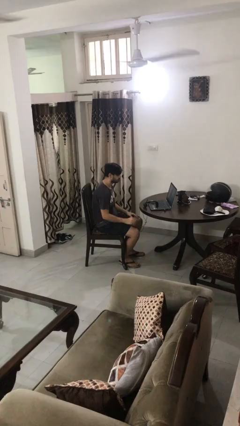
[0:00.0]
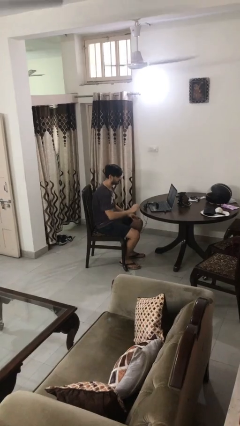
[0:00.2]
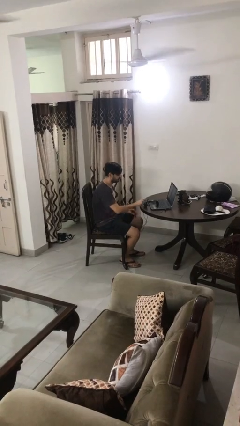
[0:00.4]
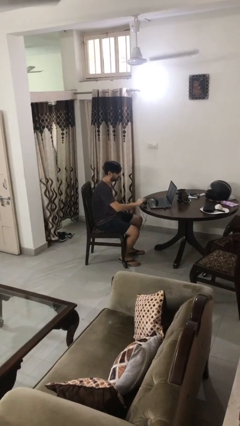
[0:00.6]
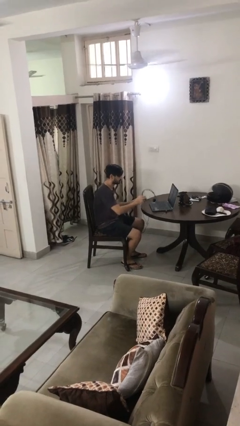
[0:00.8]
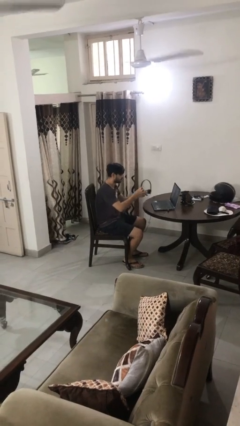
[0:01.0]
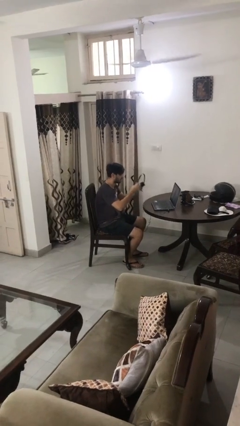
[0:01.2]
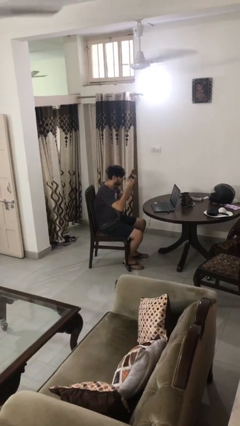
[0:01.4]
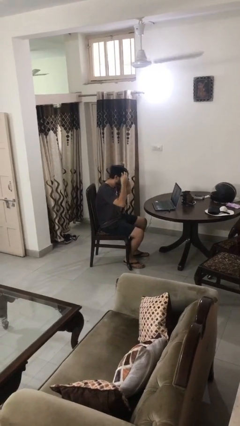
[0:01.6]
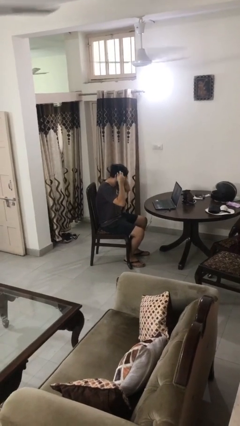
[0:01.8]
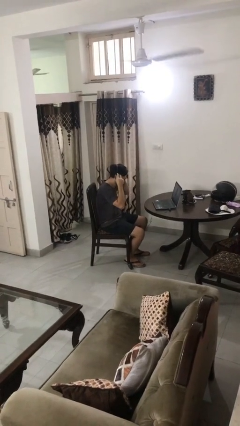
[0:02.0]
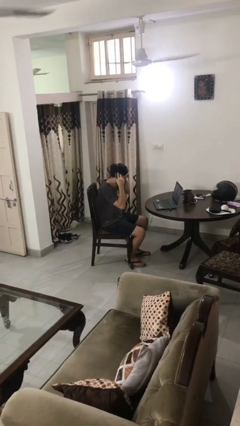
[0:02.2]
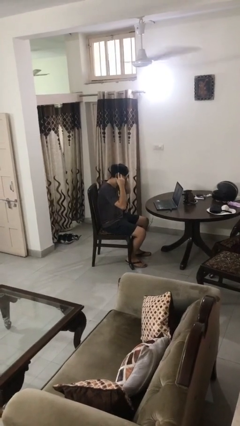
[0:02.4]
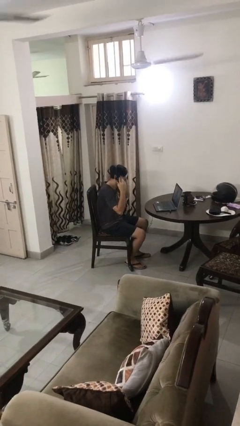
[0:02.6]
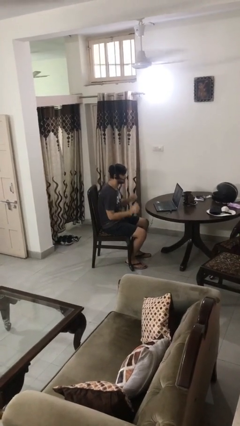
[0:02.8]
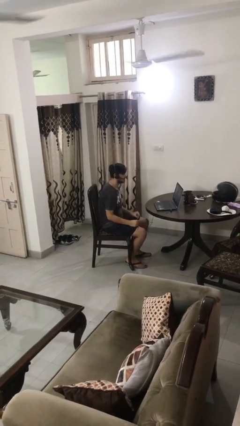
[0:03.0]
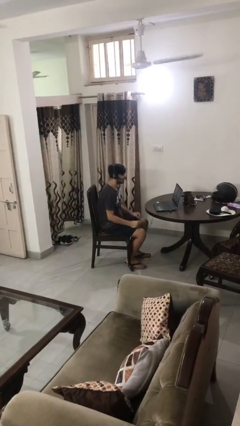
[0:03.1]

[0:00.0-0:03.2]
person puts on headphones

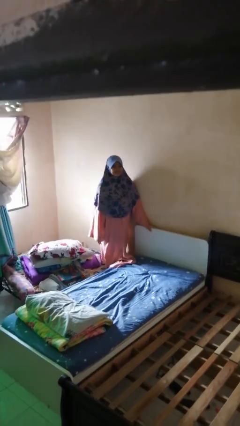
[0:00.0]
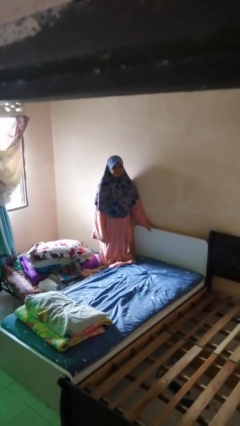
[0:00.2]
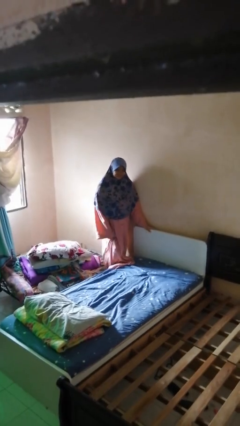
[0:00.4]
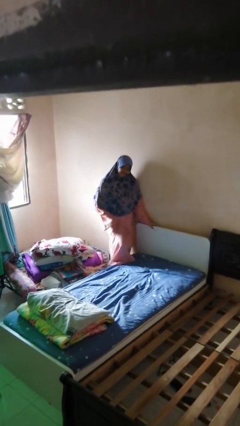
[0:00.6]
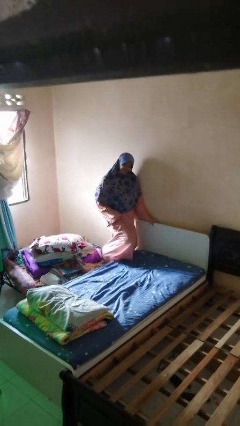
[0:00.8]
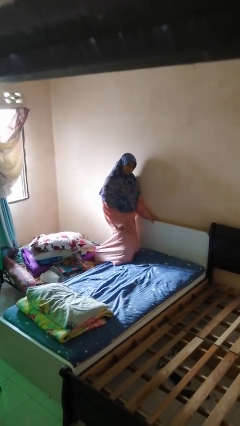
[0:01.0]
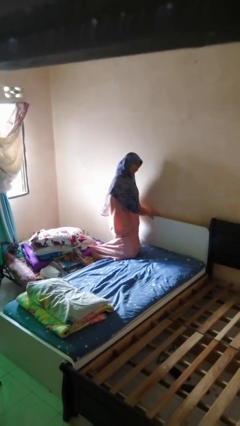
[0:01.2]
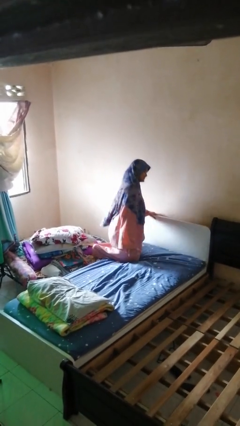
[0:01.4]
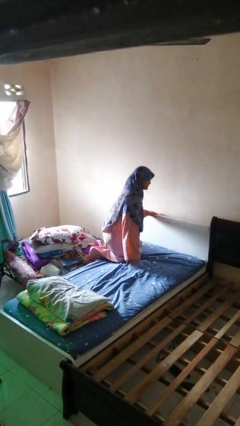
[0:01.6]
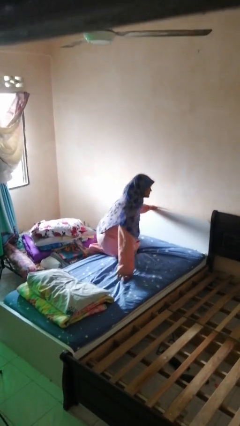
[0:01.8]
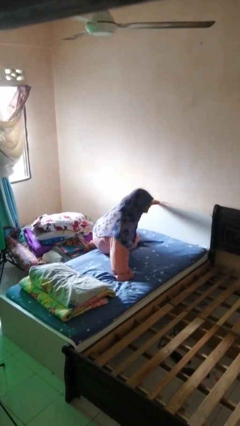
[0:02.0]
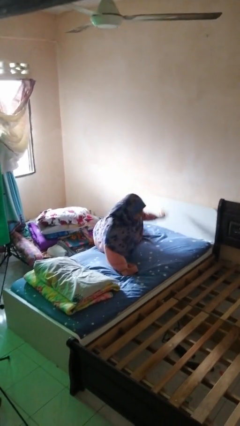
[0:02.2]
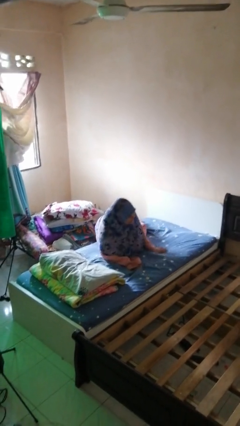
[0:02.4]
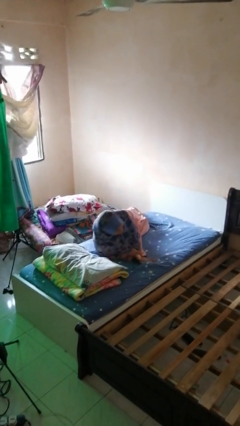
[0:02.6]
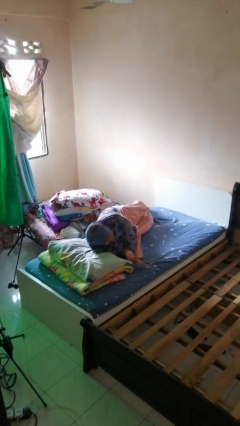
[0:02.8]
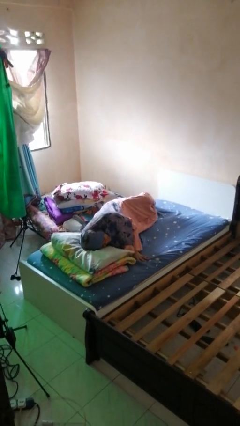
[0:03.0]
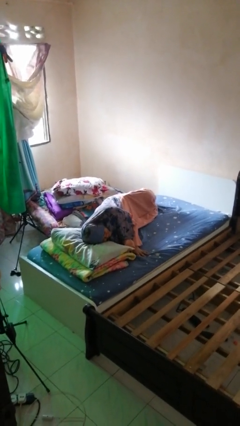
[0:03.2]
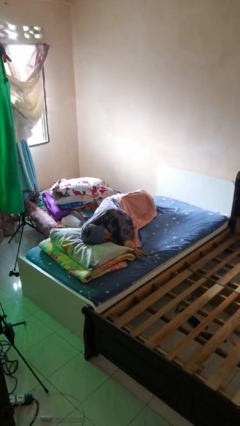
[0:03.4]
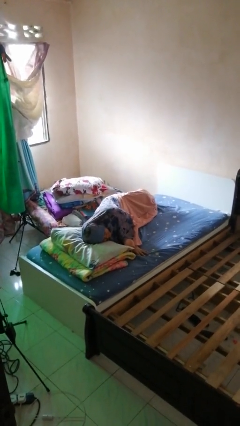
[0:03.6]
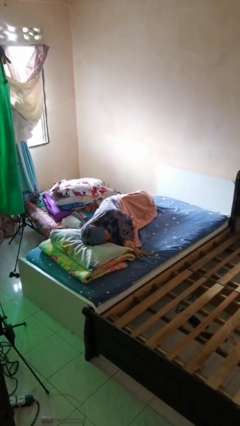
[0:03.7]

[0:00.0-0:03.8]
person lies down on bed

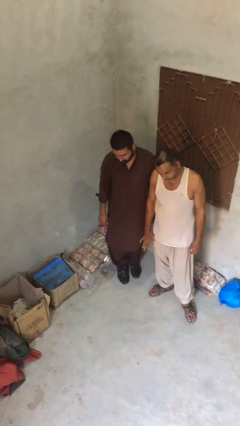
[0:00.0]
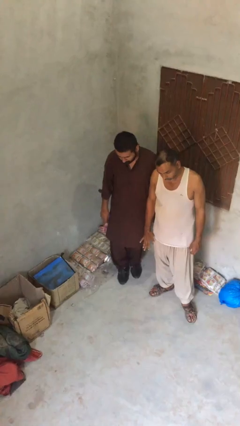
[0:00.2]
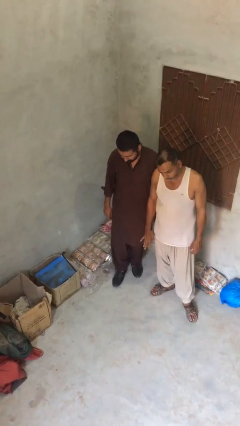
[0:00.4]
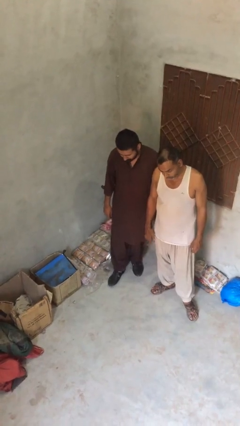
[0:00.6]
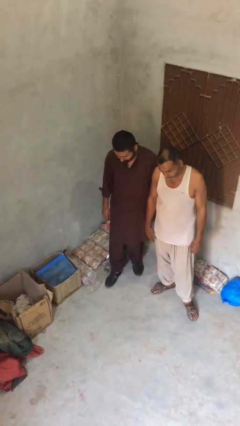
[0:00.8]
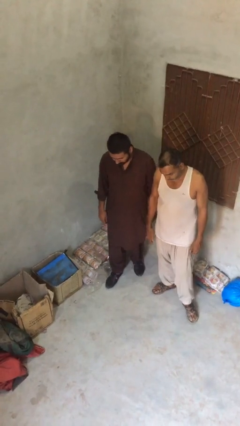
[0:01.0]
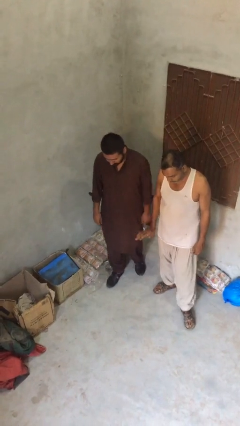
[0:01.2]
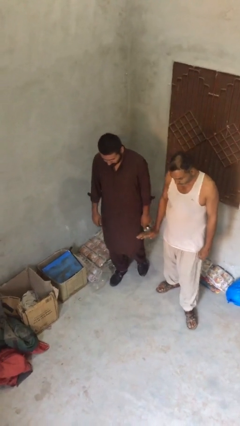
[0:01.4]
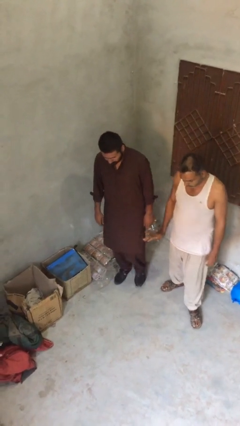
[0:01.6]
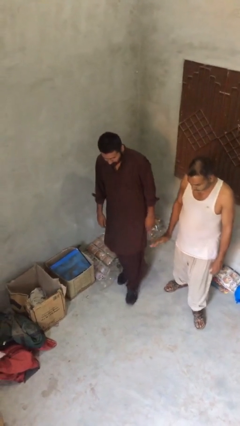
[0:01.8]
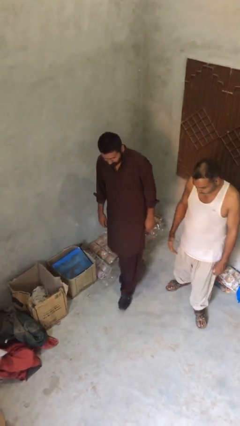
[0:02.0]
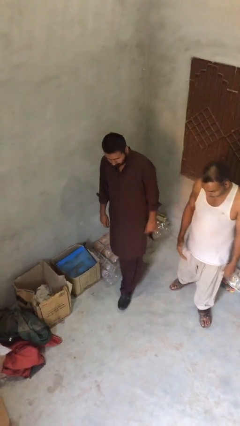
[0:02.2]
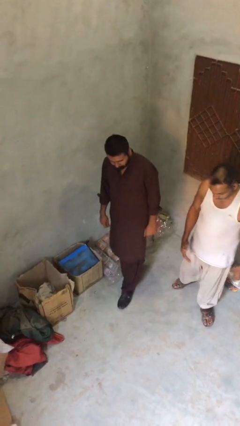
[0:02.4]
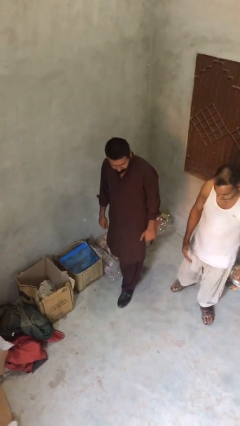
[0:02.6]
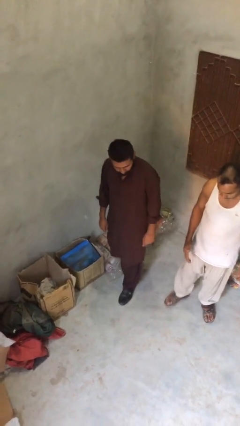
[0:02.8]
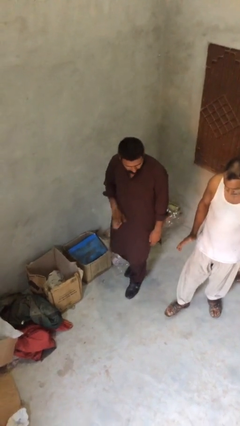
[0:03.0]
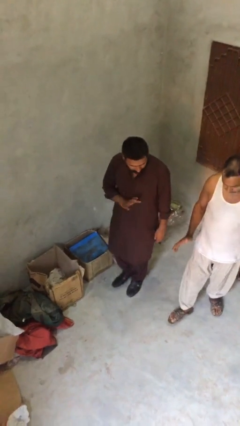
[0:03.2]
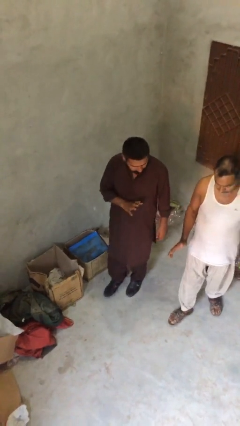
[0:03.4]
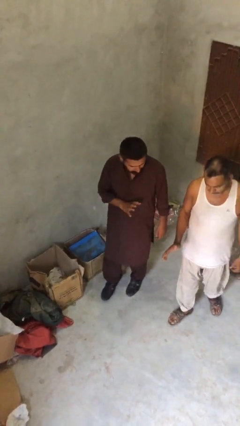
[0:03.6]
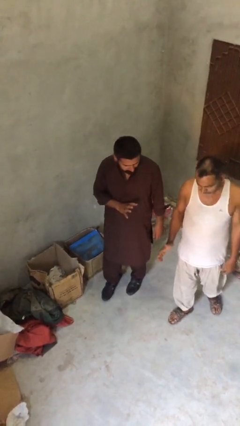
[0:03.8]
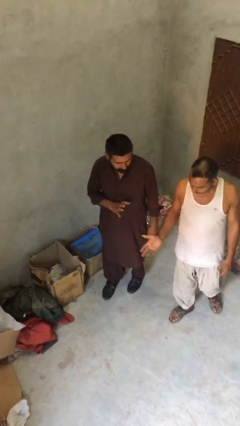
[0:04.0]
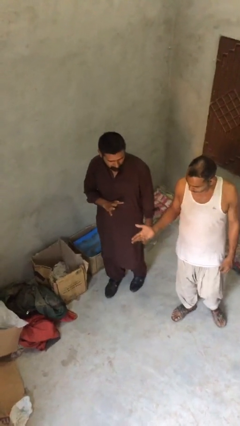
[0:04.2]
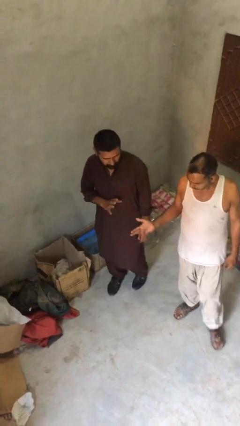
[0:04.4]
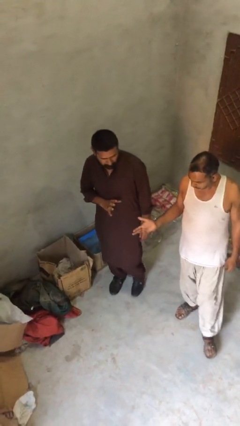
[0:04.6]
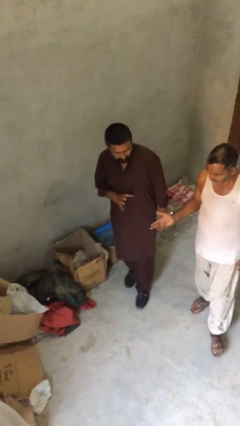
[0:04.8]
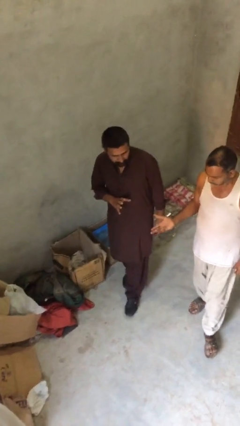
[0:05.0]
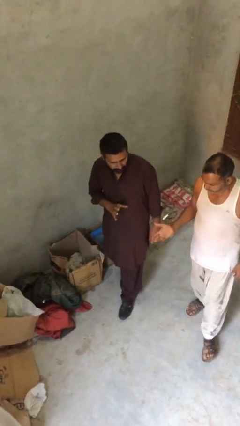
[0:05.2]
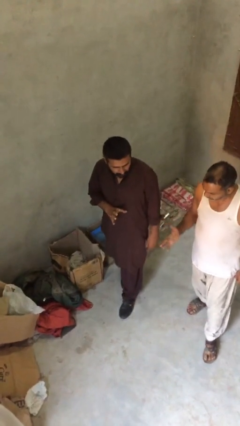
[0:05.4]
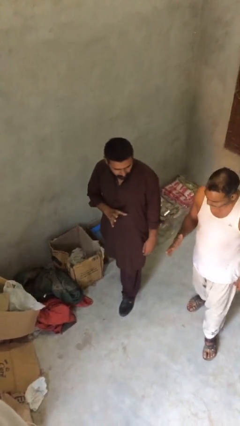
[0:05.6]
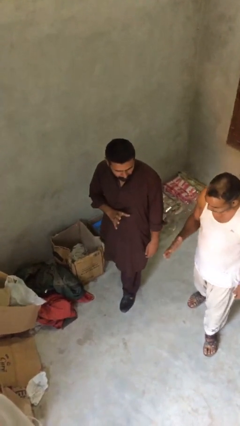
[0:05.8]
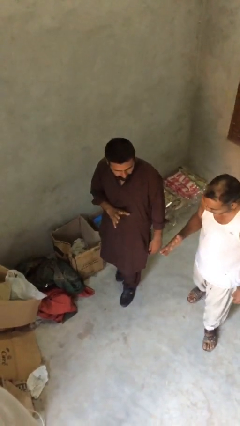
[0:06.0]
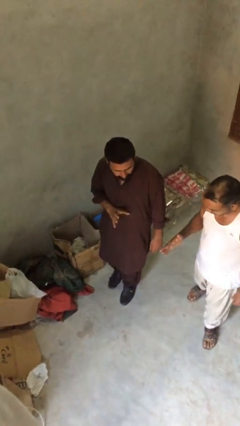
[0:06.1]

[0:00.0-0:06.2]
person talks to person

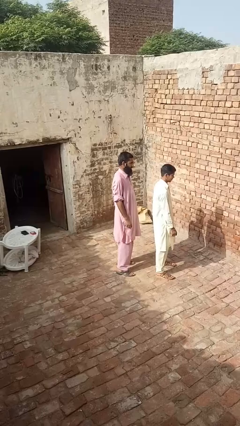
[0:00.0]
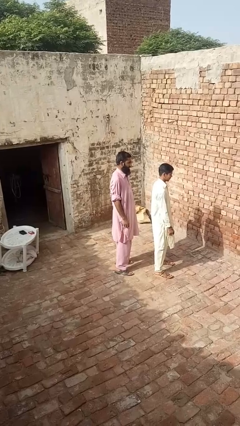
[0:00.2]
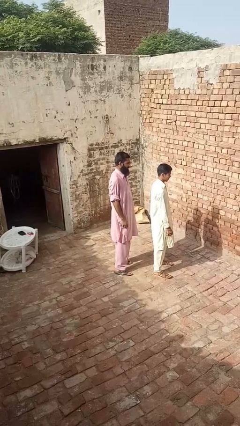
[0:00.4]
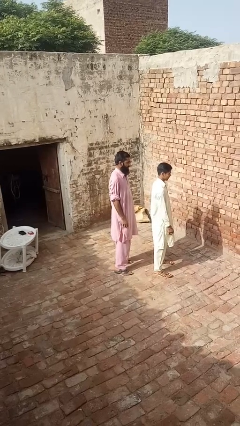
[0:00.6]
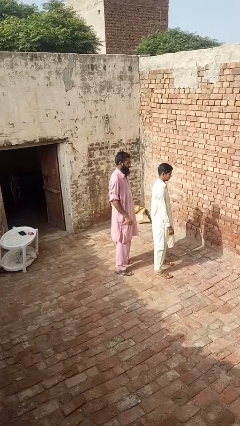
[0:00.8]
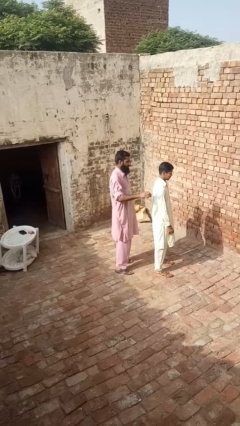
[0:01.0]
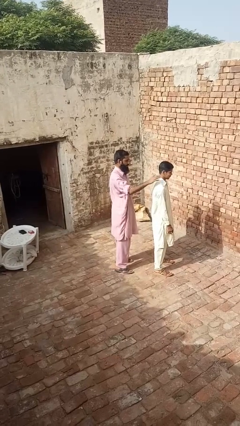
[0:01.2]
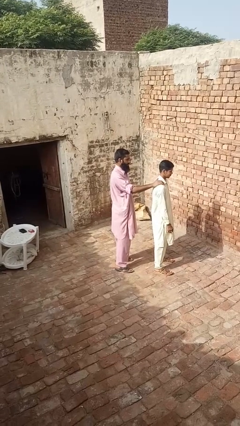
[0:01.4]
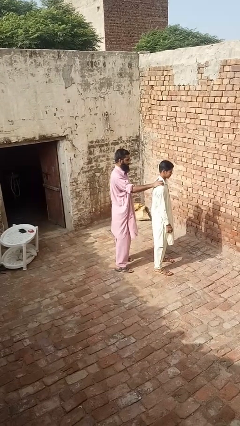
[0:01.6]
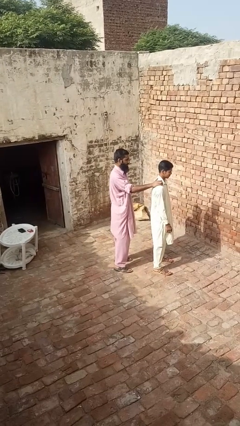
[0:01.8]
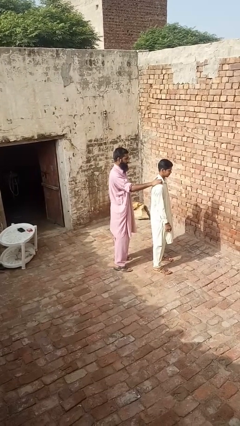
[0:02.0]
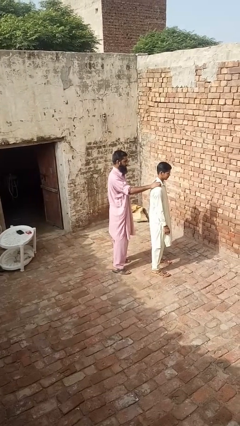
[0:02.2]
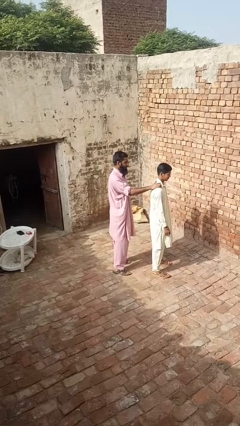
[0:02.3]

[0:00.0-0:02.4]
person grabs person by shoulder

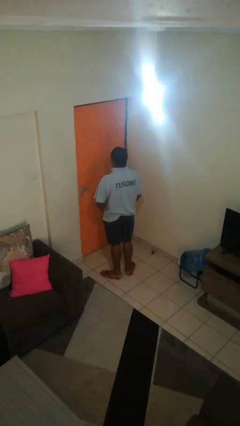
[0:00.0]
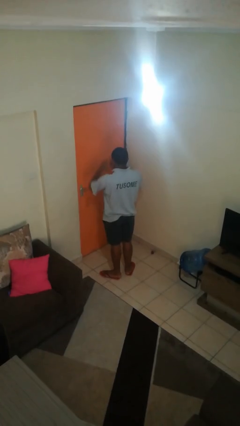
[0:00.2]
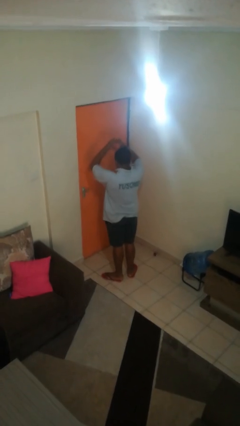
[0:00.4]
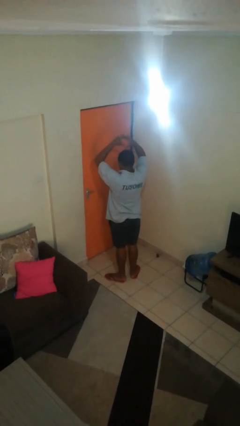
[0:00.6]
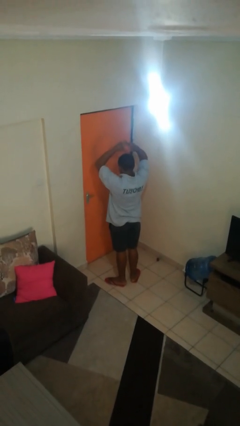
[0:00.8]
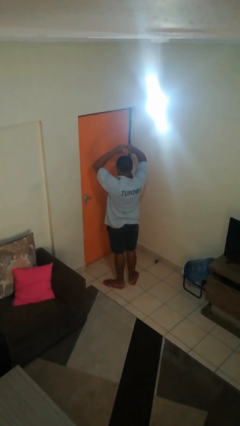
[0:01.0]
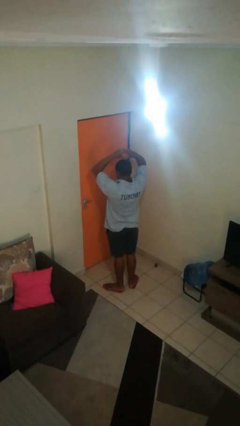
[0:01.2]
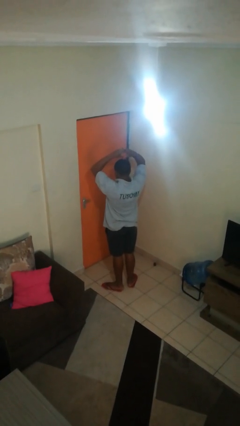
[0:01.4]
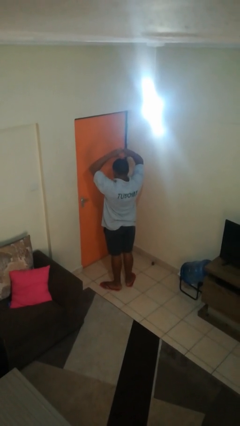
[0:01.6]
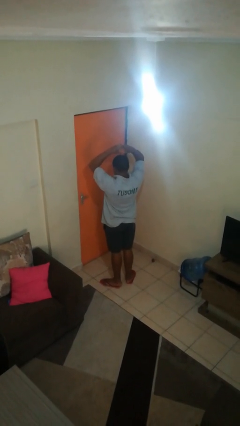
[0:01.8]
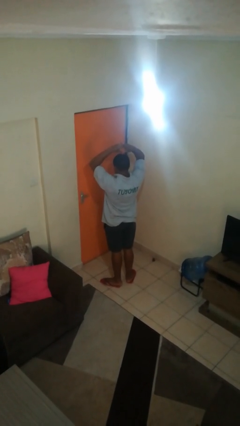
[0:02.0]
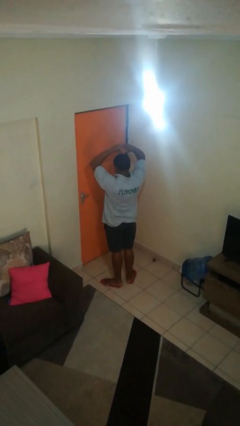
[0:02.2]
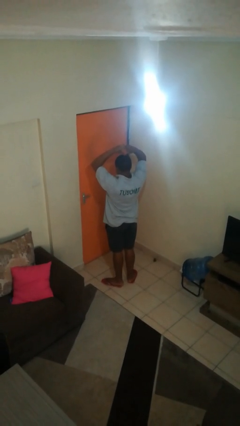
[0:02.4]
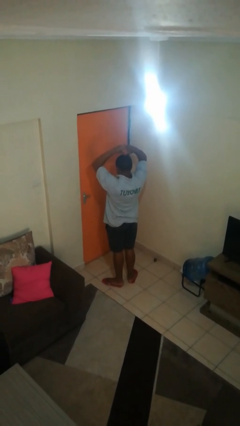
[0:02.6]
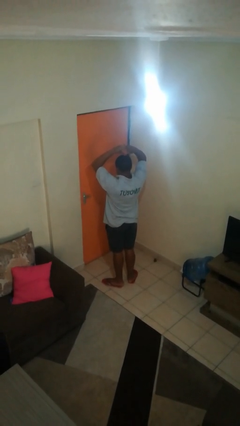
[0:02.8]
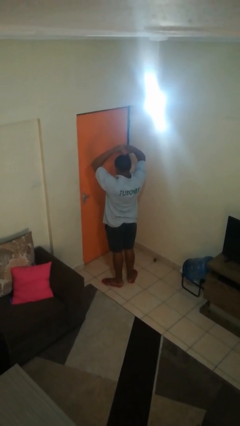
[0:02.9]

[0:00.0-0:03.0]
person gestures heart
